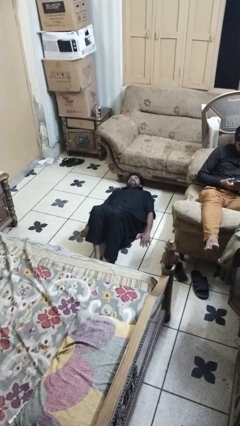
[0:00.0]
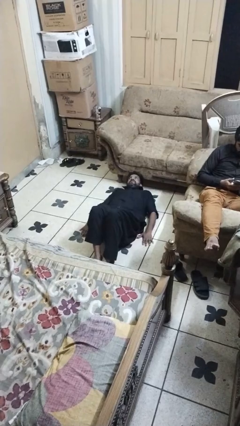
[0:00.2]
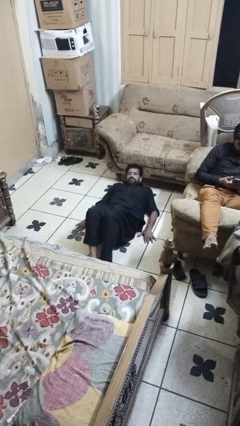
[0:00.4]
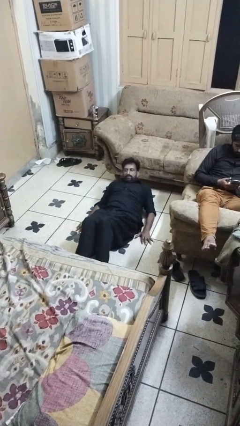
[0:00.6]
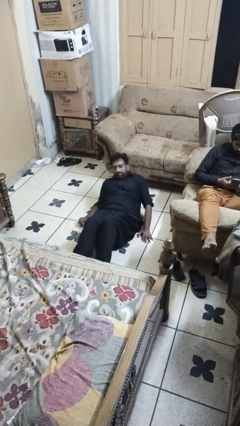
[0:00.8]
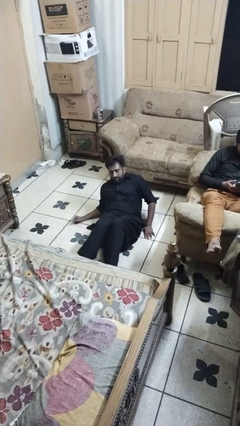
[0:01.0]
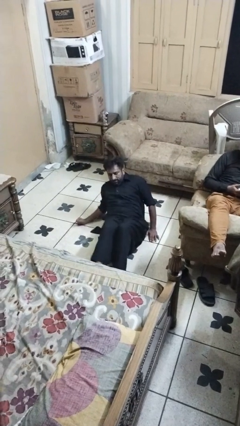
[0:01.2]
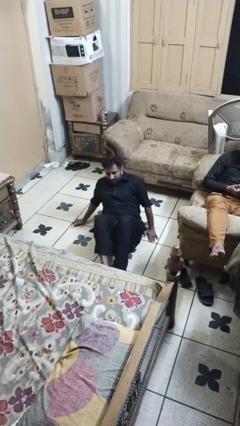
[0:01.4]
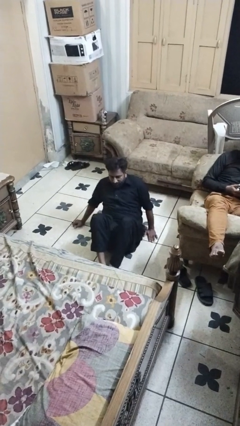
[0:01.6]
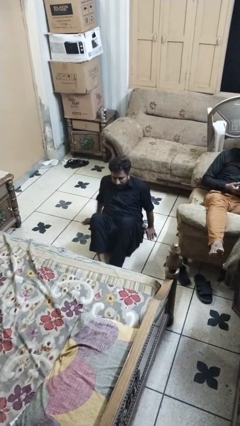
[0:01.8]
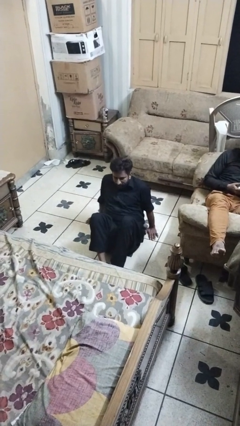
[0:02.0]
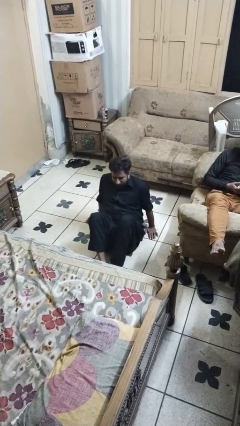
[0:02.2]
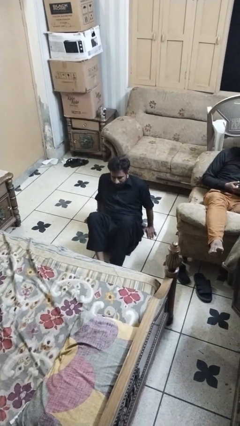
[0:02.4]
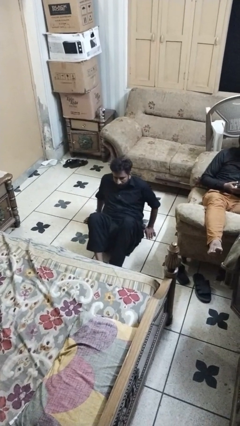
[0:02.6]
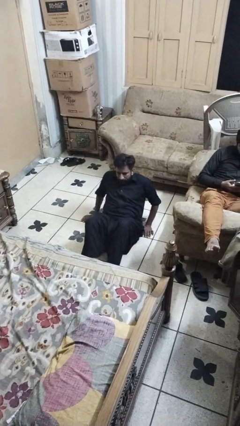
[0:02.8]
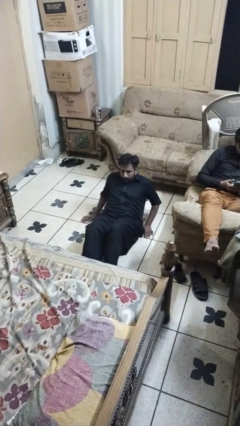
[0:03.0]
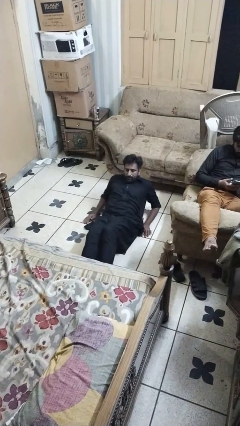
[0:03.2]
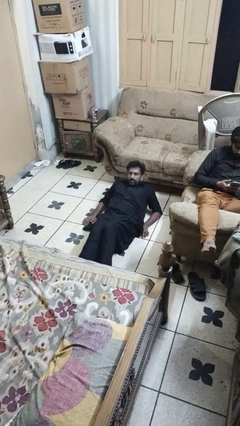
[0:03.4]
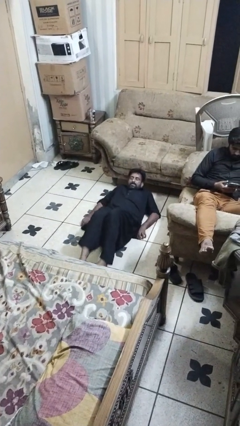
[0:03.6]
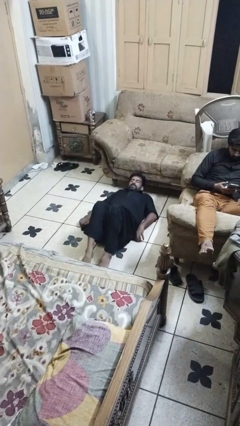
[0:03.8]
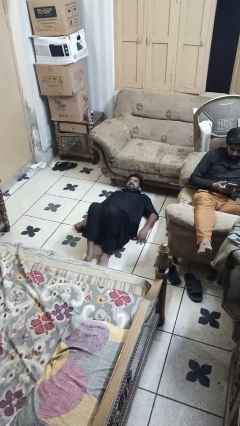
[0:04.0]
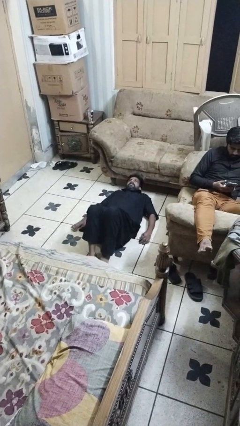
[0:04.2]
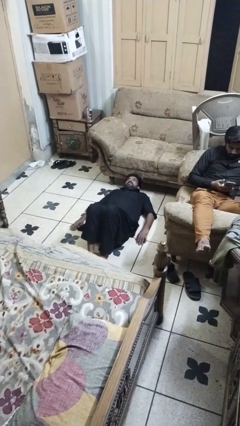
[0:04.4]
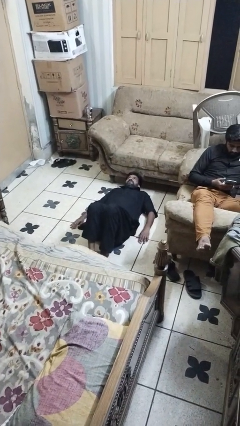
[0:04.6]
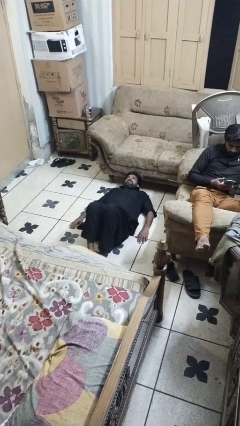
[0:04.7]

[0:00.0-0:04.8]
person exercises with situp

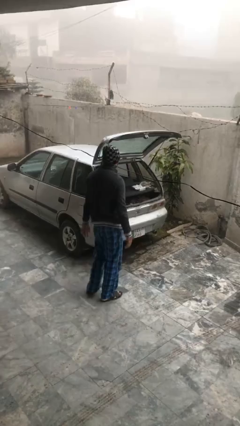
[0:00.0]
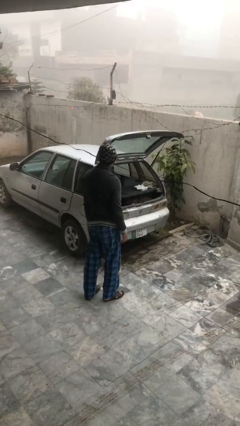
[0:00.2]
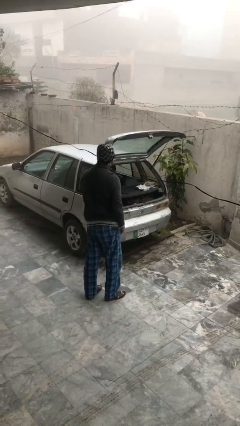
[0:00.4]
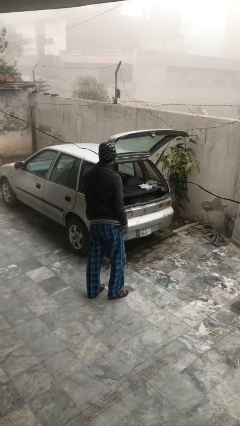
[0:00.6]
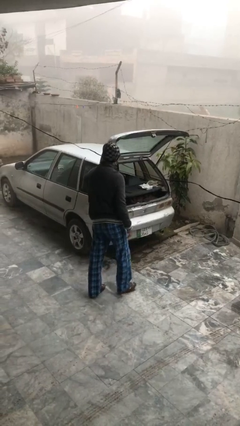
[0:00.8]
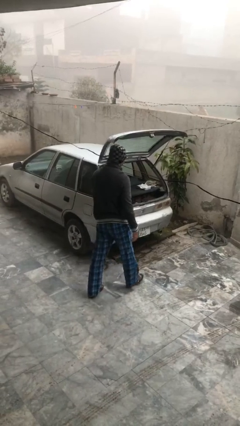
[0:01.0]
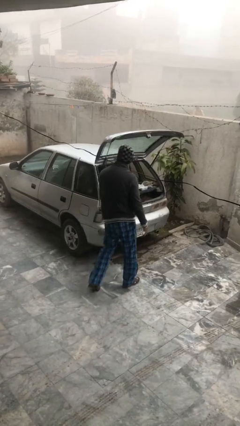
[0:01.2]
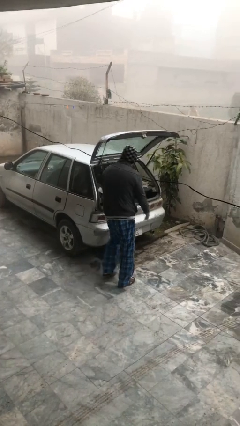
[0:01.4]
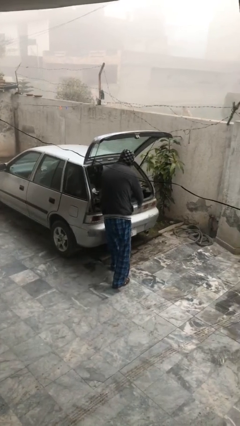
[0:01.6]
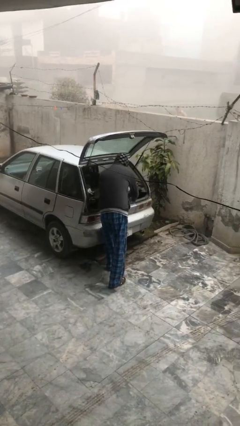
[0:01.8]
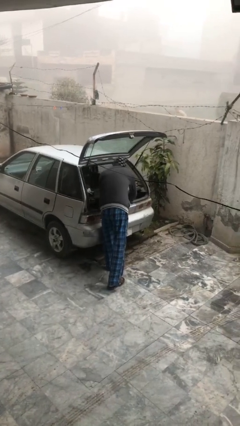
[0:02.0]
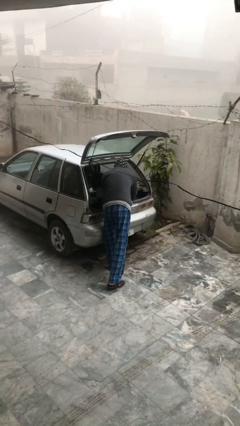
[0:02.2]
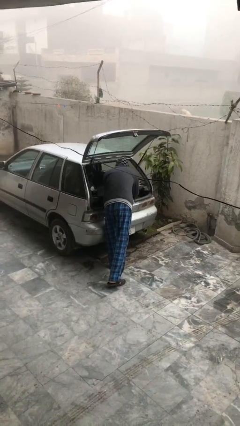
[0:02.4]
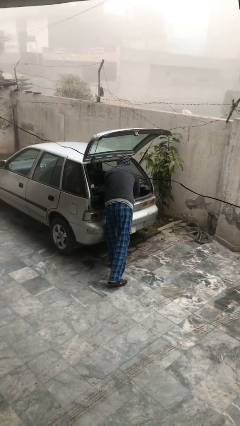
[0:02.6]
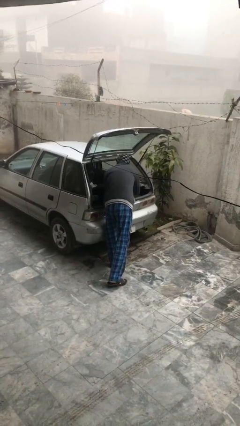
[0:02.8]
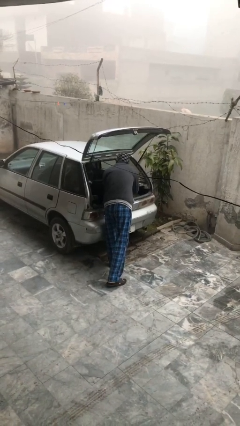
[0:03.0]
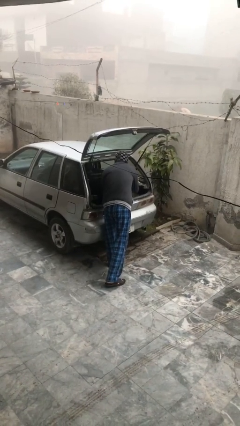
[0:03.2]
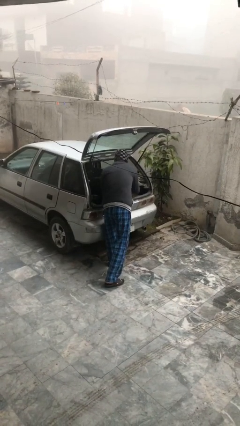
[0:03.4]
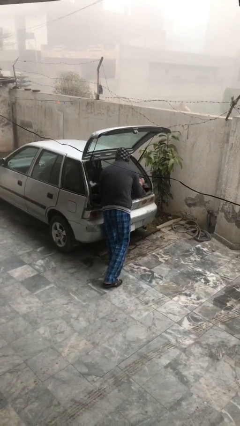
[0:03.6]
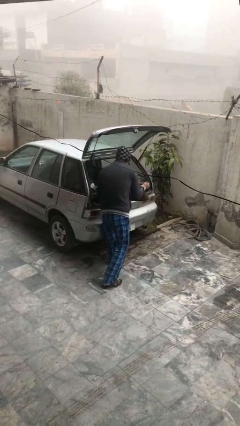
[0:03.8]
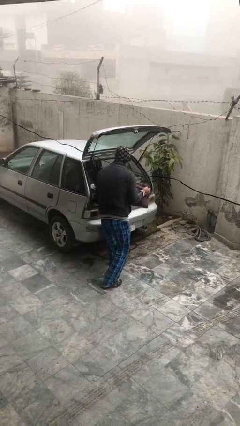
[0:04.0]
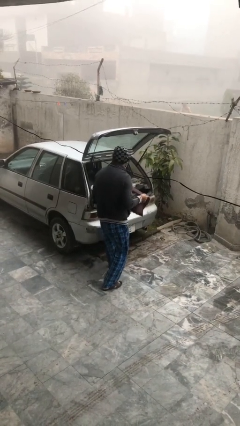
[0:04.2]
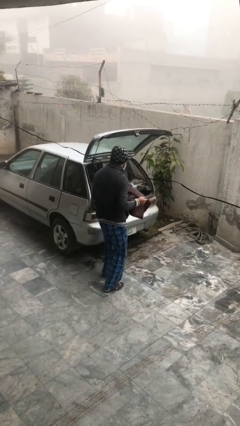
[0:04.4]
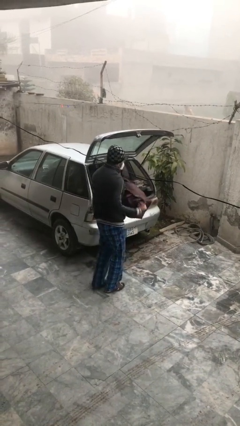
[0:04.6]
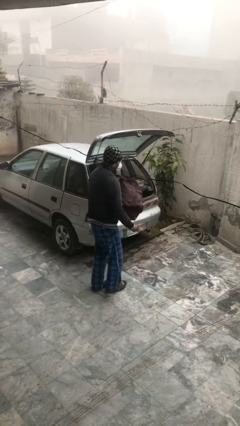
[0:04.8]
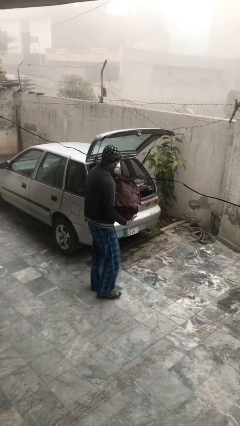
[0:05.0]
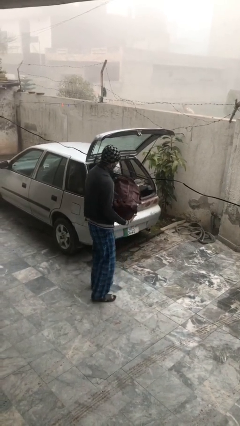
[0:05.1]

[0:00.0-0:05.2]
person unloads car

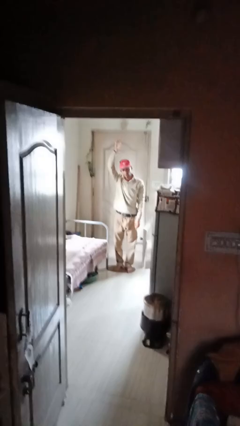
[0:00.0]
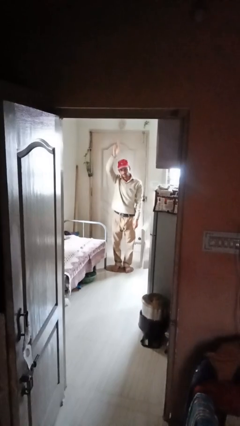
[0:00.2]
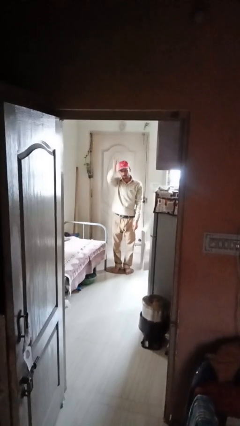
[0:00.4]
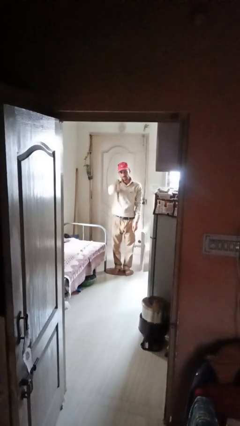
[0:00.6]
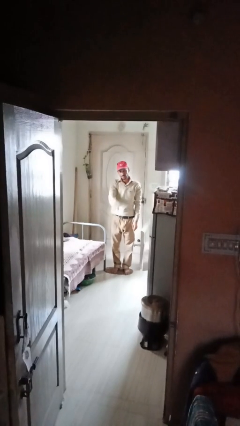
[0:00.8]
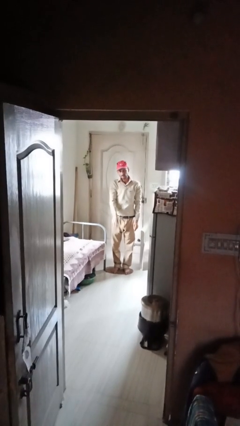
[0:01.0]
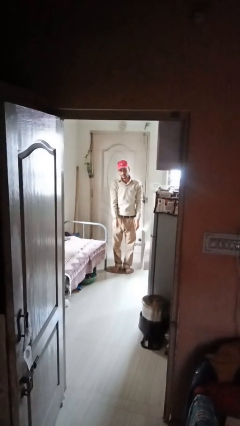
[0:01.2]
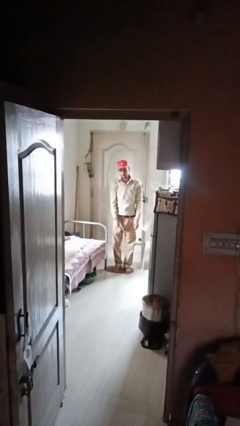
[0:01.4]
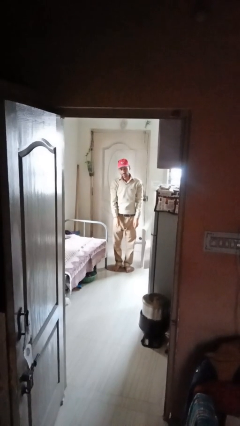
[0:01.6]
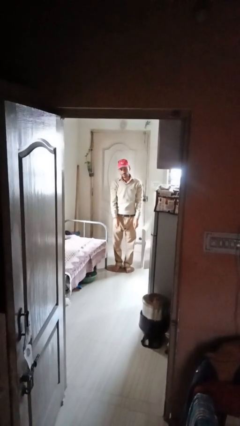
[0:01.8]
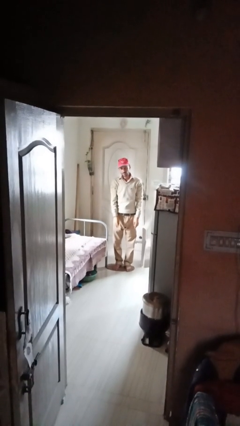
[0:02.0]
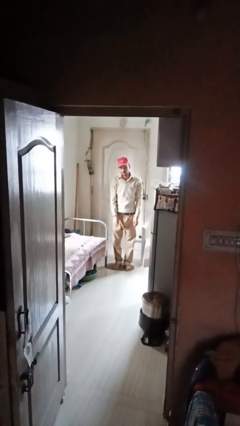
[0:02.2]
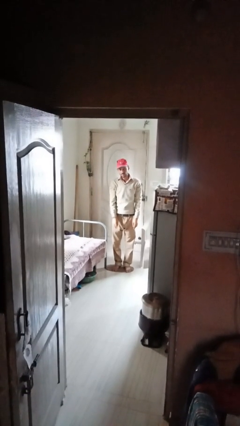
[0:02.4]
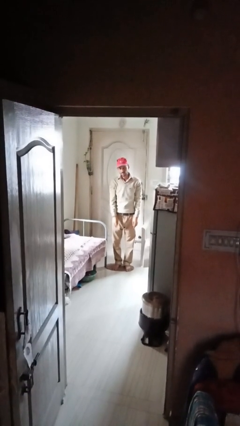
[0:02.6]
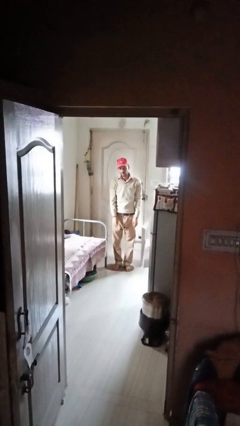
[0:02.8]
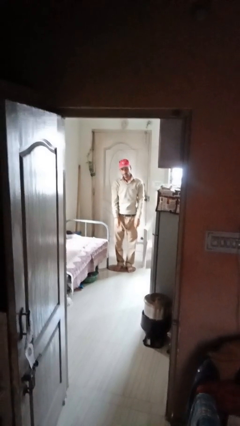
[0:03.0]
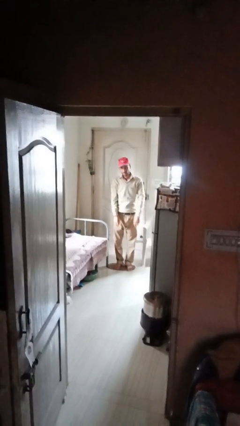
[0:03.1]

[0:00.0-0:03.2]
person gestures swipe down

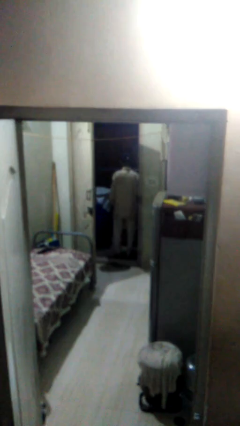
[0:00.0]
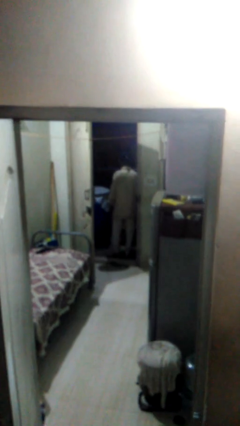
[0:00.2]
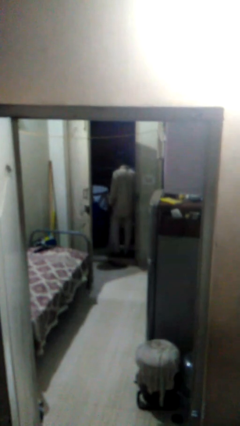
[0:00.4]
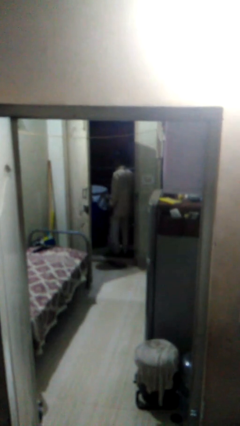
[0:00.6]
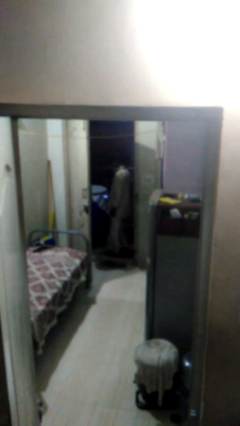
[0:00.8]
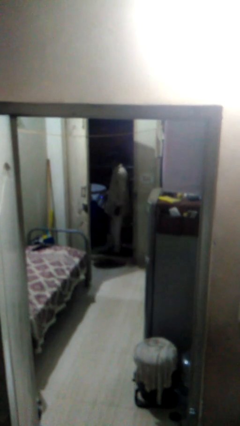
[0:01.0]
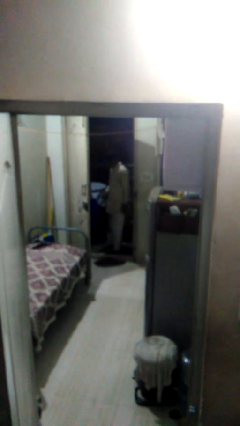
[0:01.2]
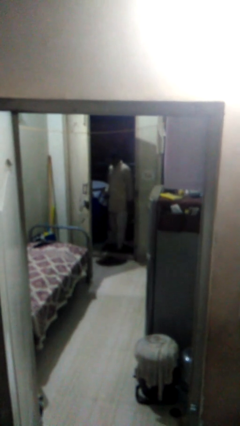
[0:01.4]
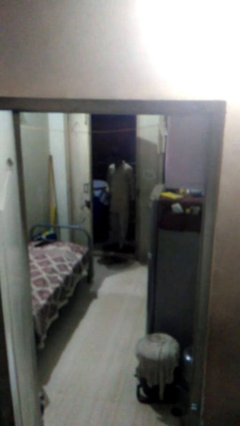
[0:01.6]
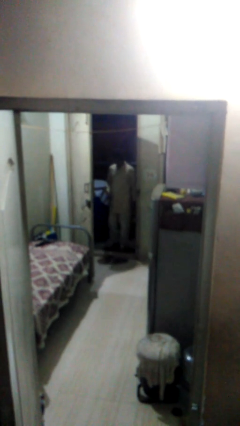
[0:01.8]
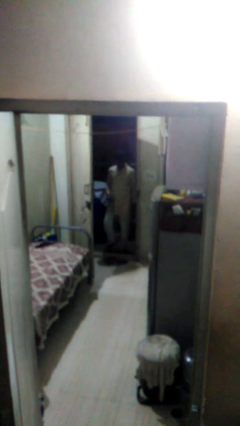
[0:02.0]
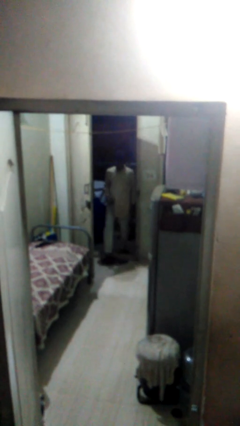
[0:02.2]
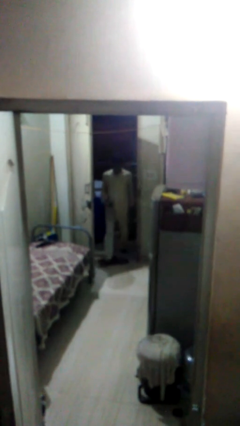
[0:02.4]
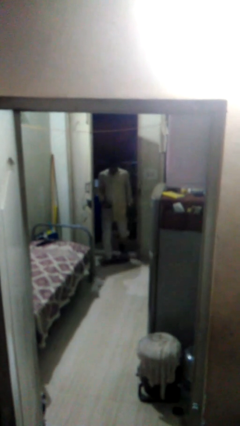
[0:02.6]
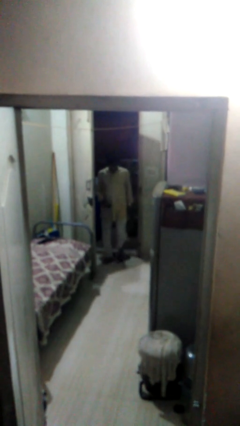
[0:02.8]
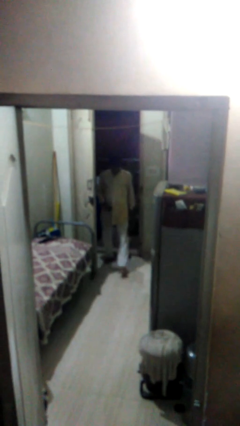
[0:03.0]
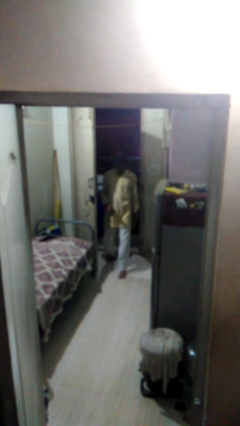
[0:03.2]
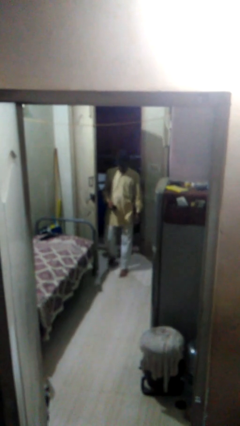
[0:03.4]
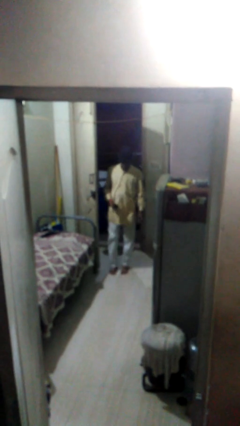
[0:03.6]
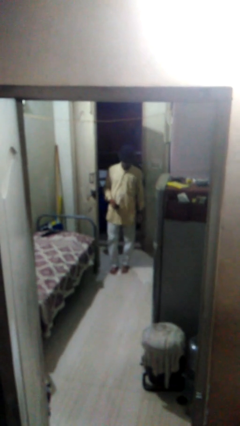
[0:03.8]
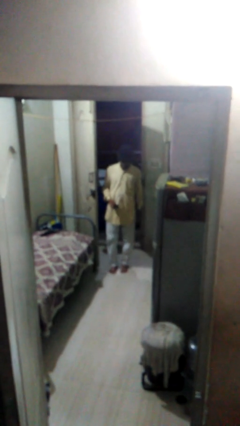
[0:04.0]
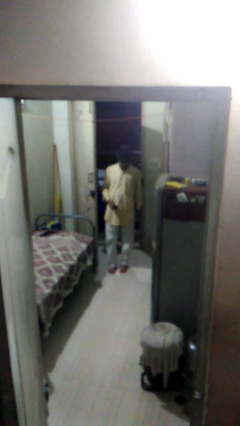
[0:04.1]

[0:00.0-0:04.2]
person enters scene through structure

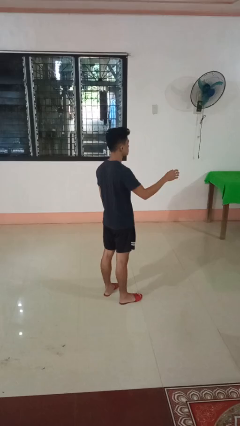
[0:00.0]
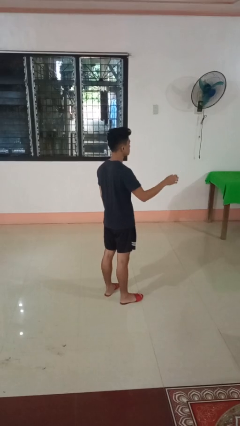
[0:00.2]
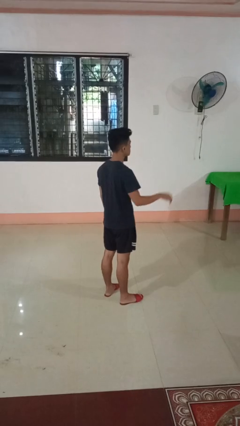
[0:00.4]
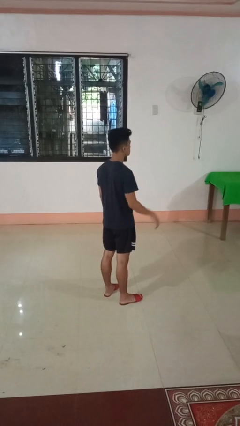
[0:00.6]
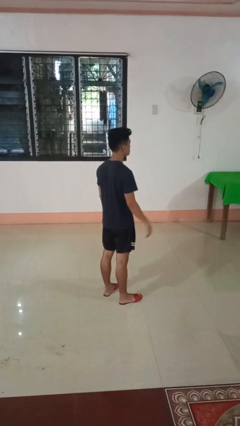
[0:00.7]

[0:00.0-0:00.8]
person gestures swipe right
